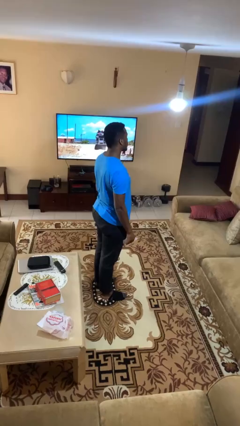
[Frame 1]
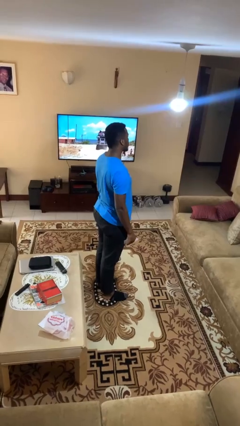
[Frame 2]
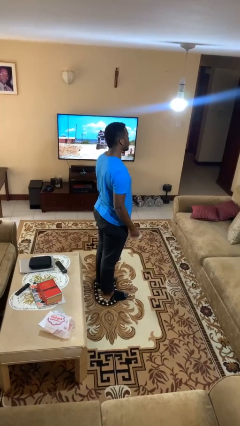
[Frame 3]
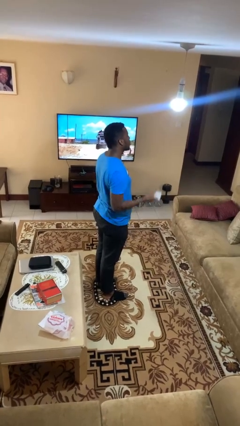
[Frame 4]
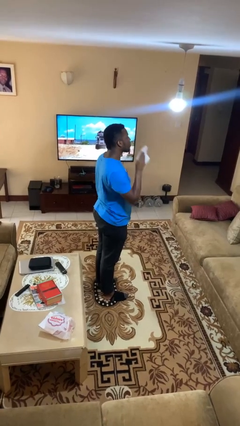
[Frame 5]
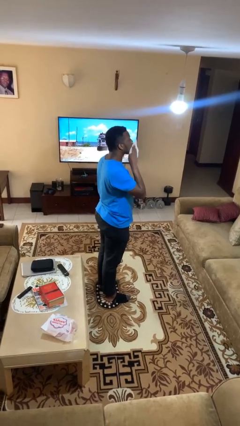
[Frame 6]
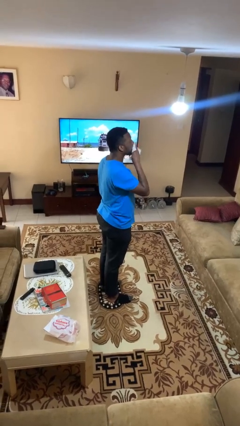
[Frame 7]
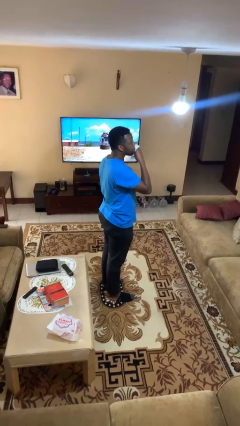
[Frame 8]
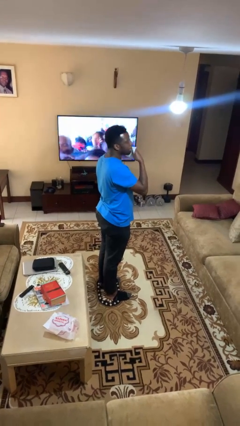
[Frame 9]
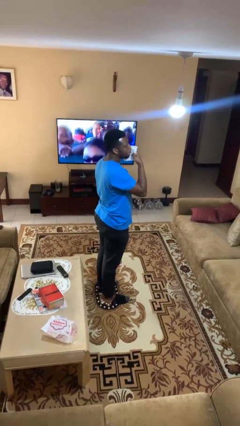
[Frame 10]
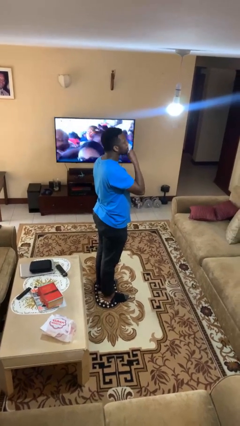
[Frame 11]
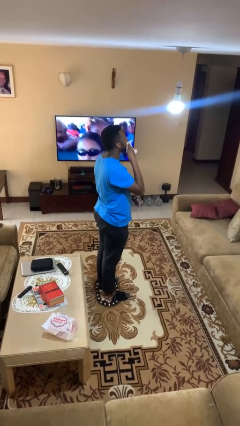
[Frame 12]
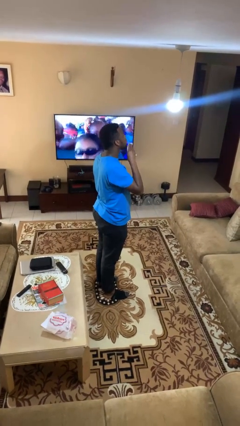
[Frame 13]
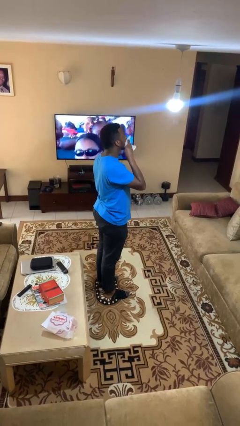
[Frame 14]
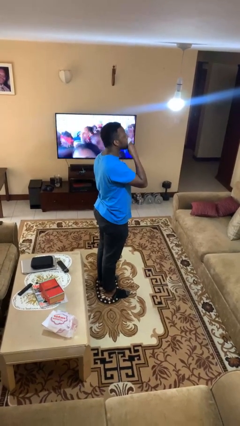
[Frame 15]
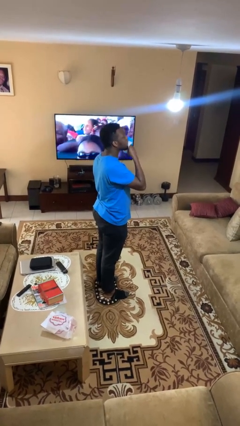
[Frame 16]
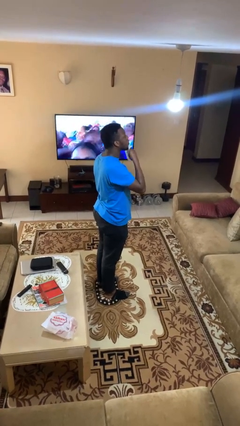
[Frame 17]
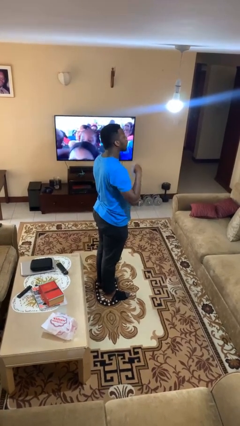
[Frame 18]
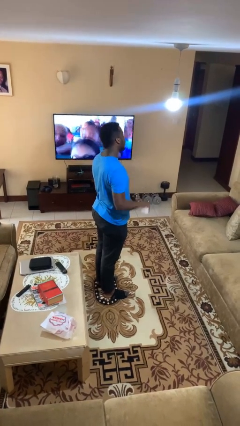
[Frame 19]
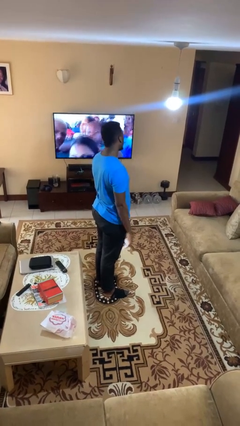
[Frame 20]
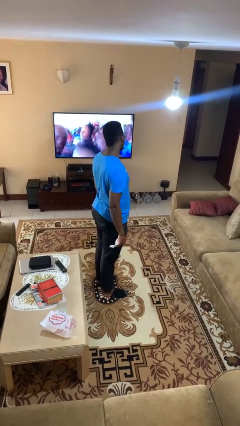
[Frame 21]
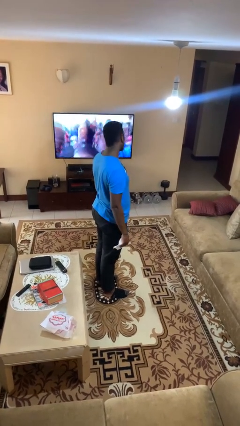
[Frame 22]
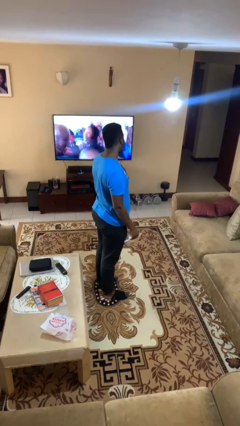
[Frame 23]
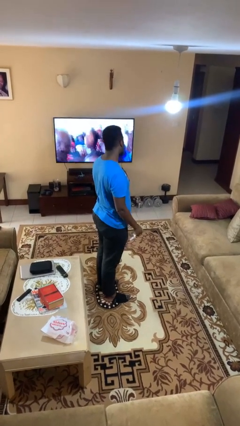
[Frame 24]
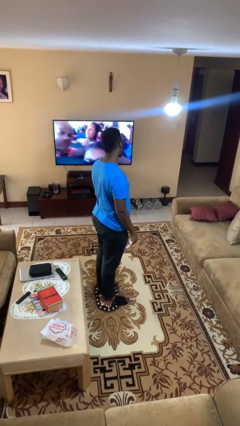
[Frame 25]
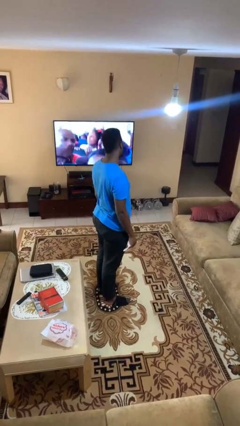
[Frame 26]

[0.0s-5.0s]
person wipes mouth with napkin

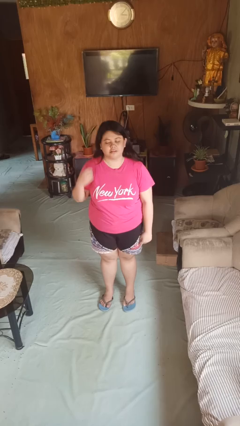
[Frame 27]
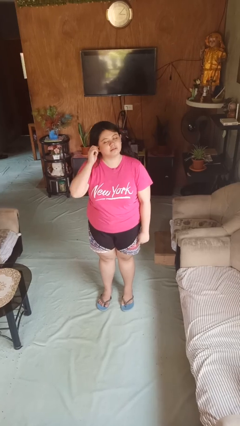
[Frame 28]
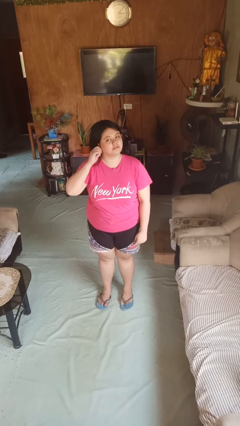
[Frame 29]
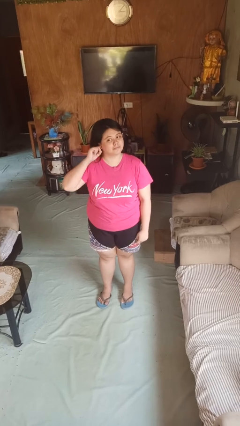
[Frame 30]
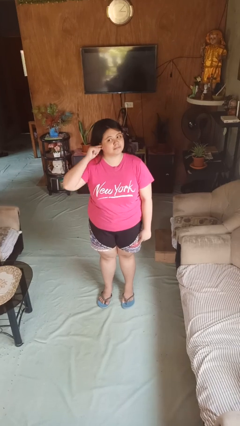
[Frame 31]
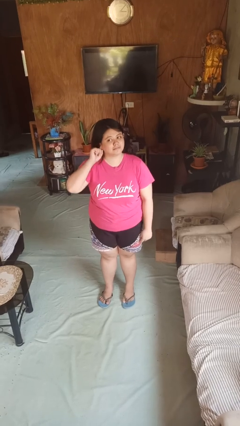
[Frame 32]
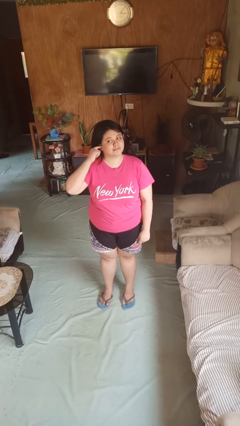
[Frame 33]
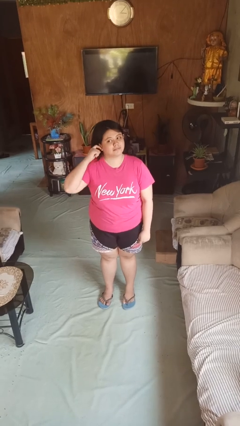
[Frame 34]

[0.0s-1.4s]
person touches earlobe

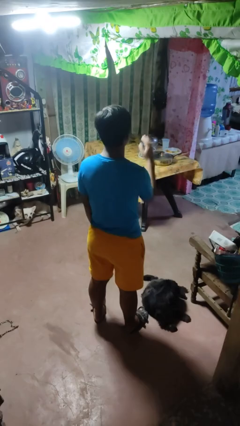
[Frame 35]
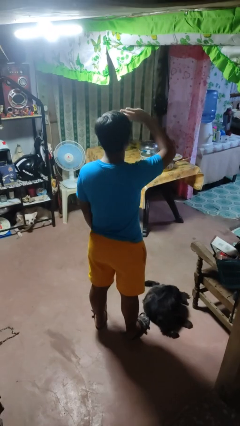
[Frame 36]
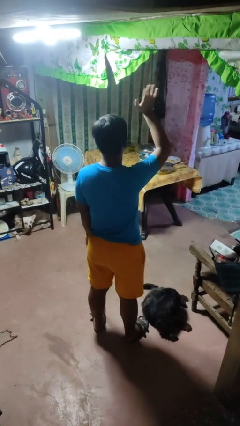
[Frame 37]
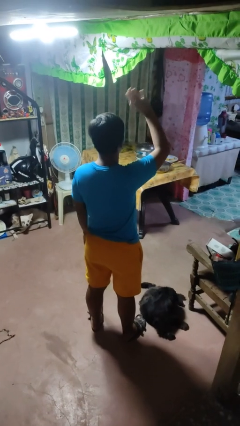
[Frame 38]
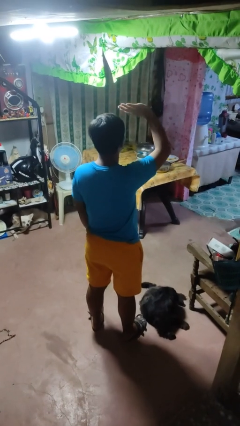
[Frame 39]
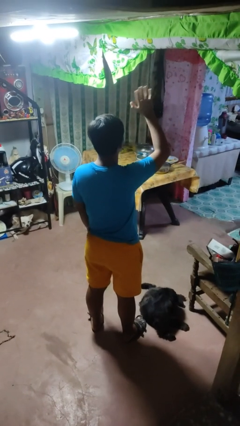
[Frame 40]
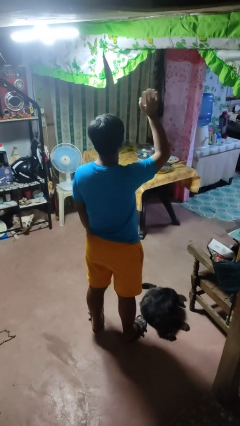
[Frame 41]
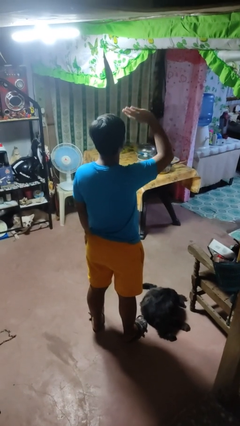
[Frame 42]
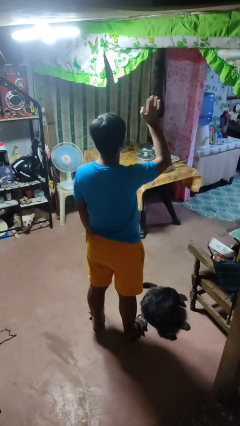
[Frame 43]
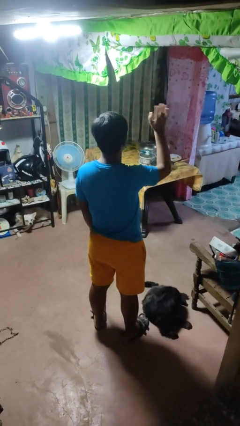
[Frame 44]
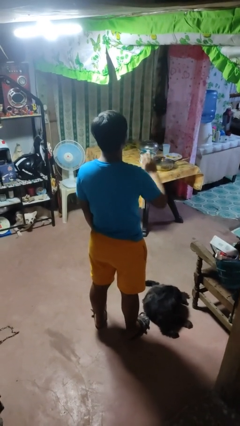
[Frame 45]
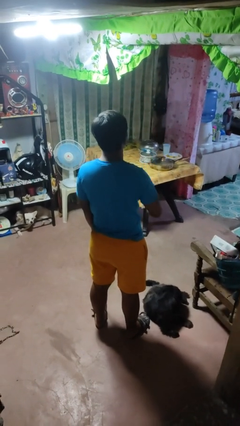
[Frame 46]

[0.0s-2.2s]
person waves at person

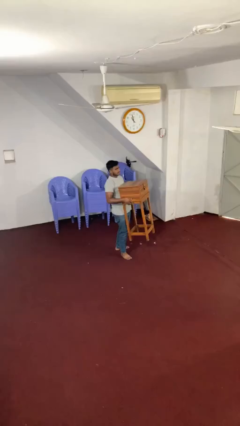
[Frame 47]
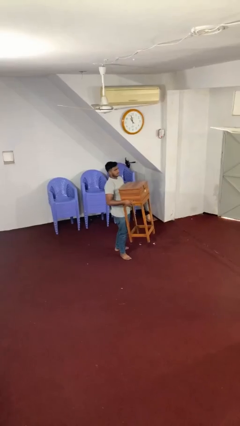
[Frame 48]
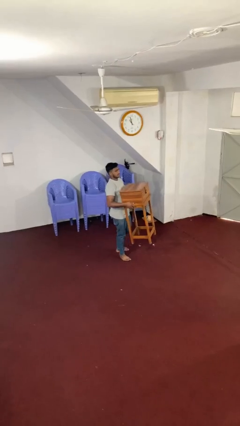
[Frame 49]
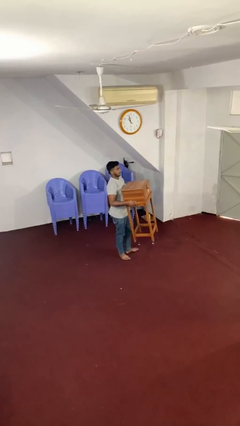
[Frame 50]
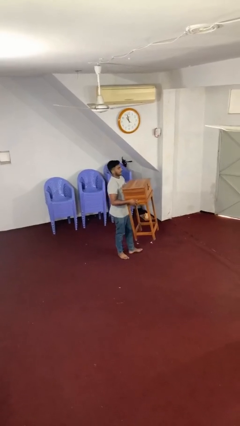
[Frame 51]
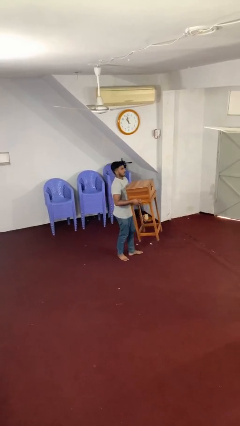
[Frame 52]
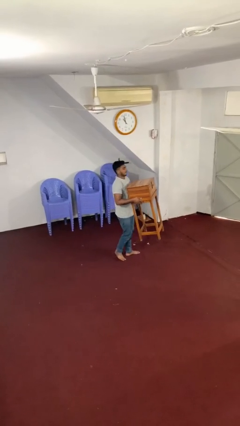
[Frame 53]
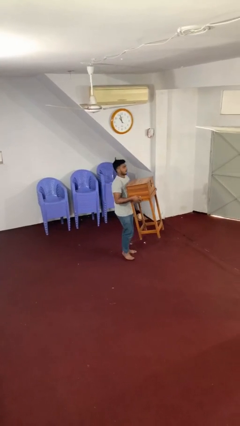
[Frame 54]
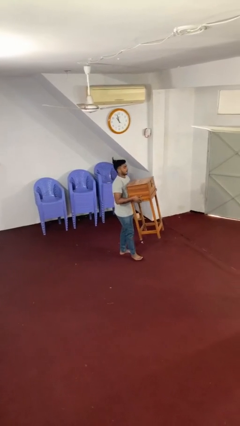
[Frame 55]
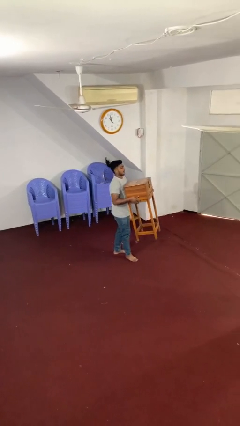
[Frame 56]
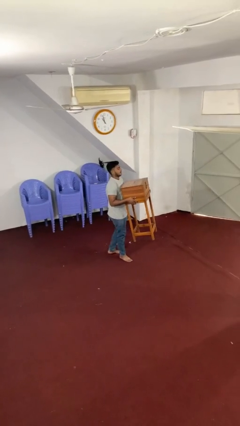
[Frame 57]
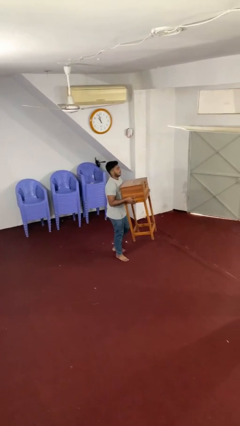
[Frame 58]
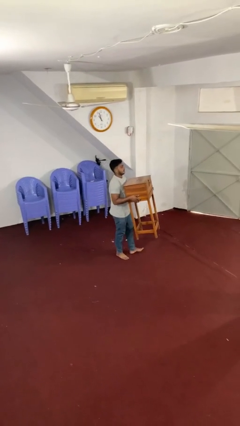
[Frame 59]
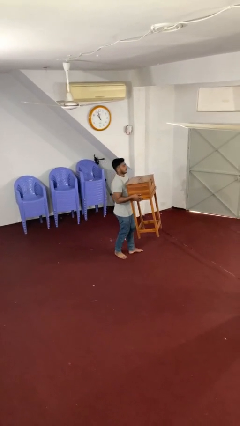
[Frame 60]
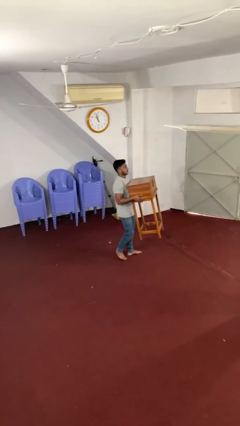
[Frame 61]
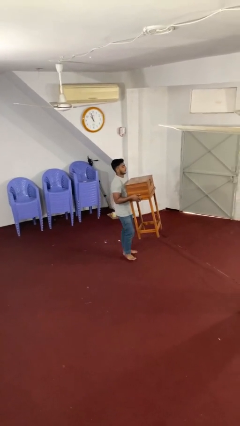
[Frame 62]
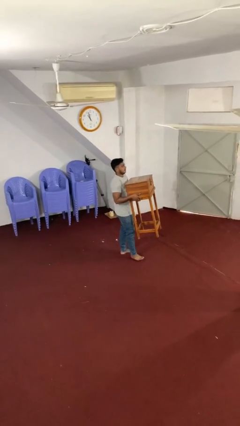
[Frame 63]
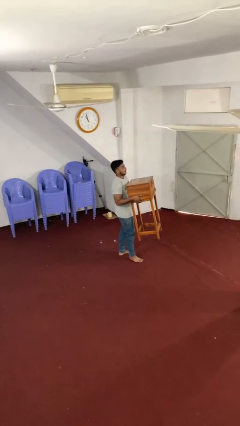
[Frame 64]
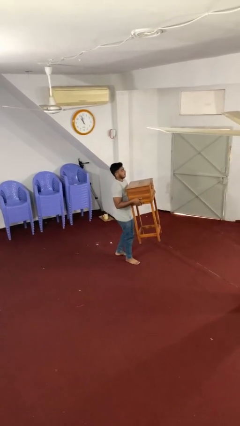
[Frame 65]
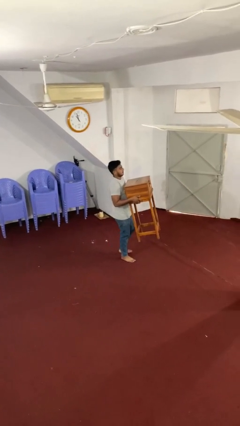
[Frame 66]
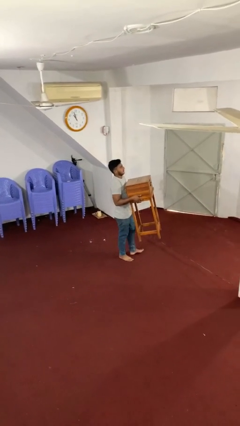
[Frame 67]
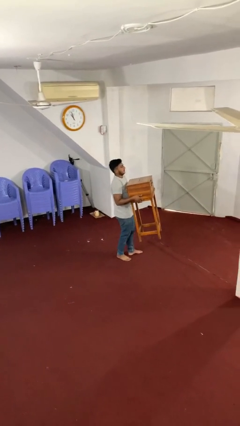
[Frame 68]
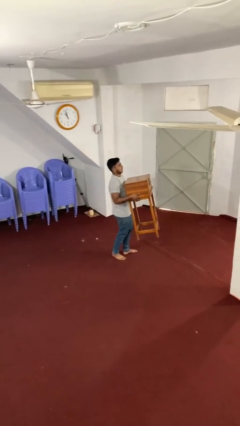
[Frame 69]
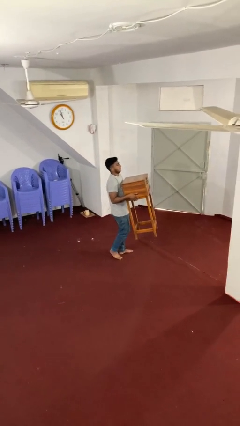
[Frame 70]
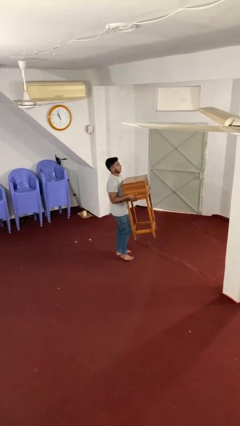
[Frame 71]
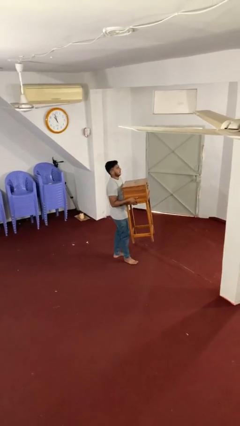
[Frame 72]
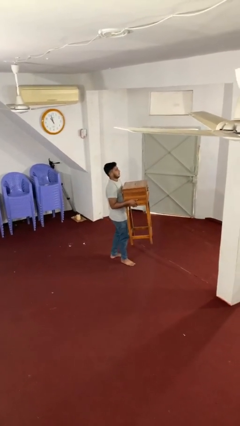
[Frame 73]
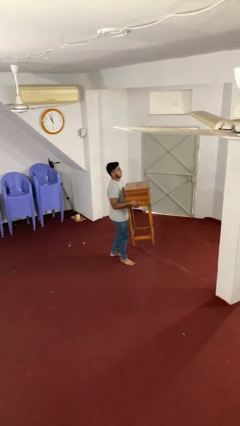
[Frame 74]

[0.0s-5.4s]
person carries heavy object

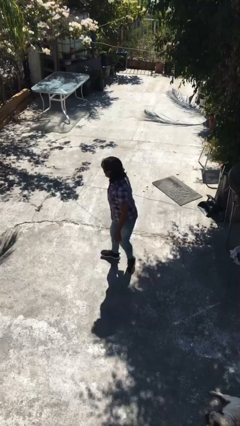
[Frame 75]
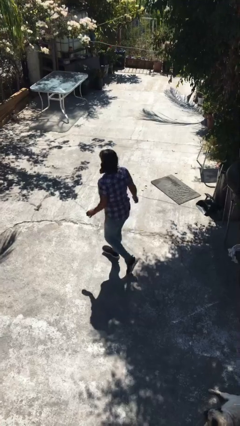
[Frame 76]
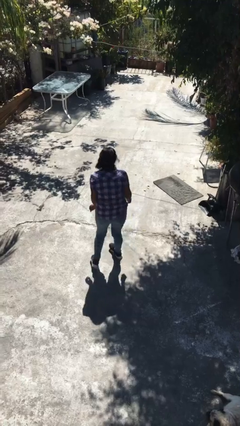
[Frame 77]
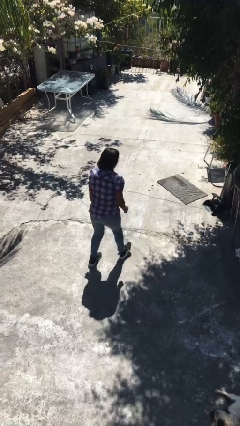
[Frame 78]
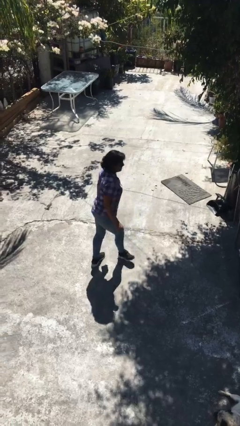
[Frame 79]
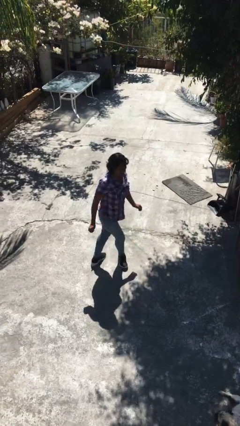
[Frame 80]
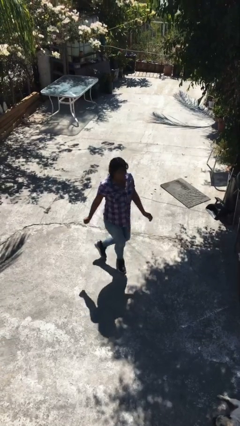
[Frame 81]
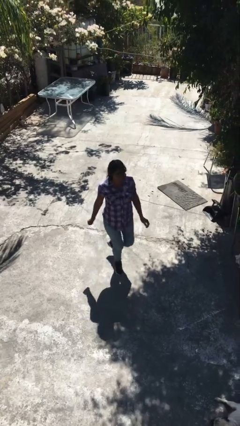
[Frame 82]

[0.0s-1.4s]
person twirls

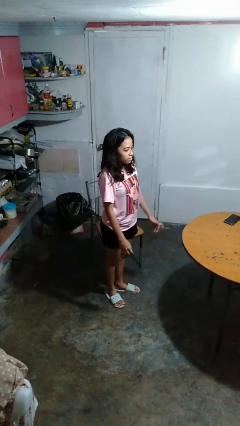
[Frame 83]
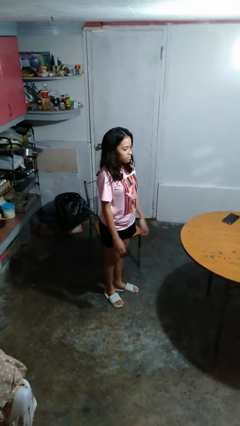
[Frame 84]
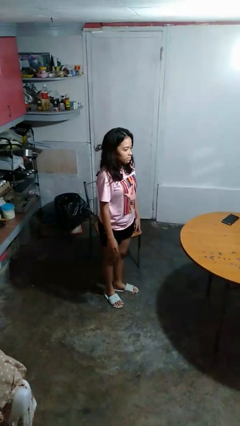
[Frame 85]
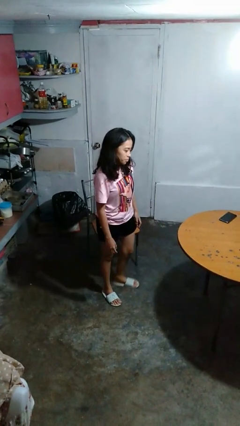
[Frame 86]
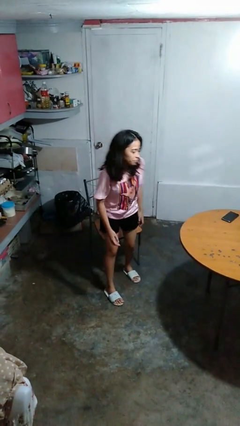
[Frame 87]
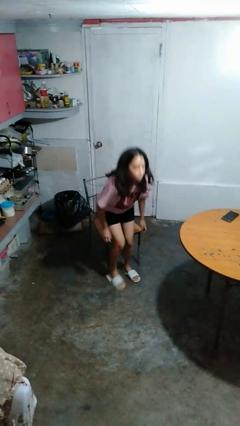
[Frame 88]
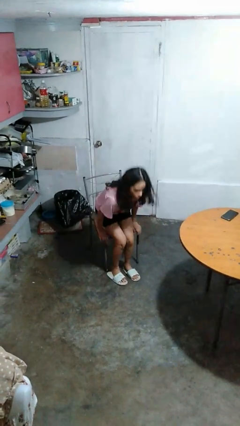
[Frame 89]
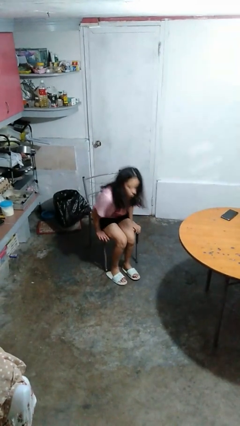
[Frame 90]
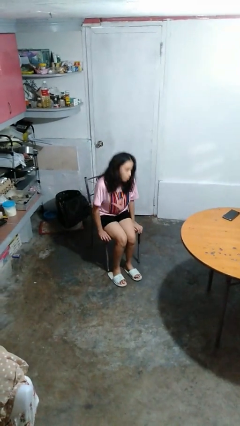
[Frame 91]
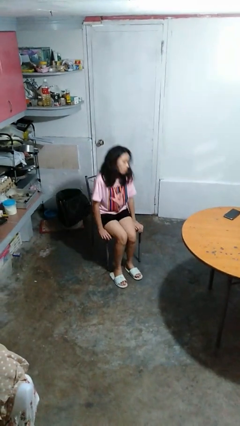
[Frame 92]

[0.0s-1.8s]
person sits down

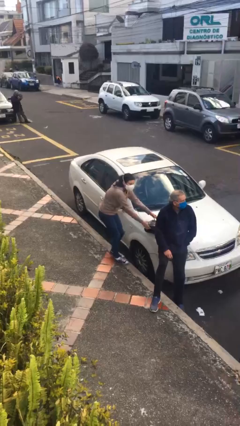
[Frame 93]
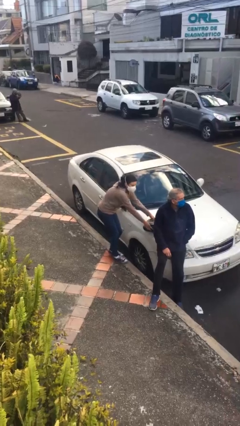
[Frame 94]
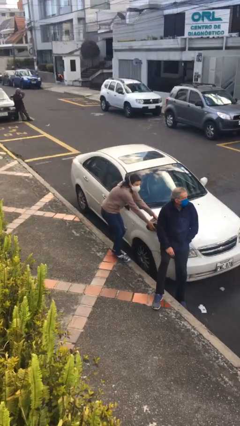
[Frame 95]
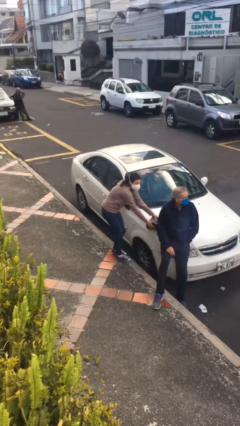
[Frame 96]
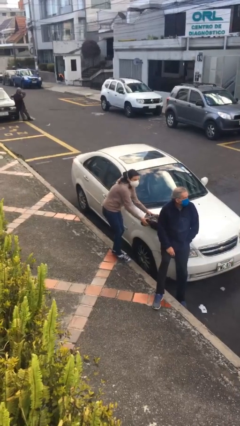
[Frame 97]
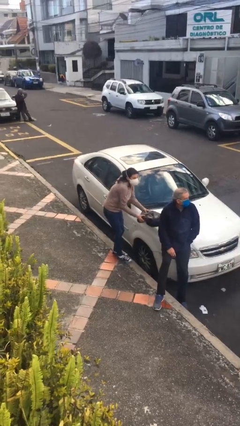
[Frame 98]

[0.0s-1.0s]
person steals object from person
